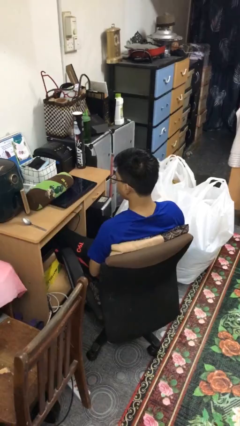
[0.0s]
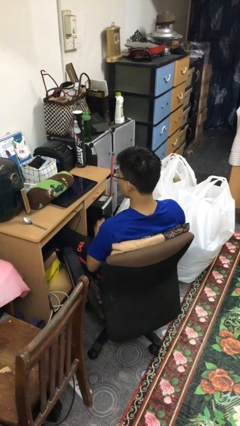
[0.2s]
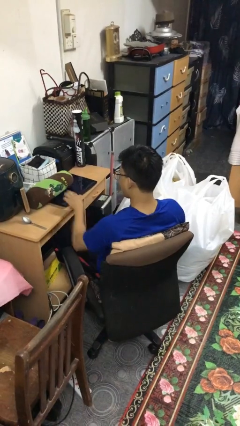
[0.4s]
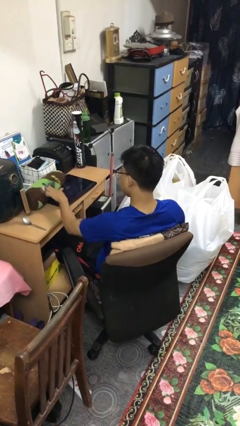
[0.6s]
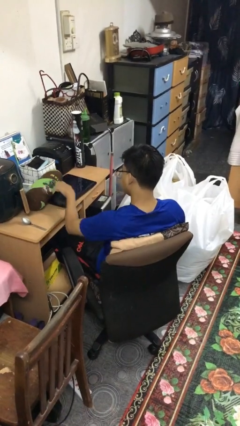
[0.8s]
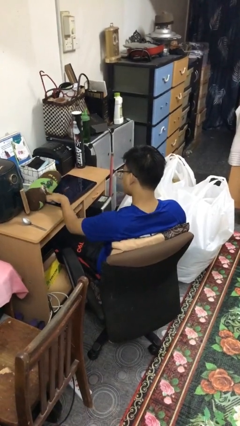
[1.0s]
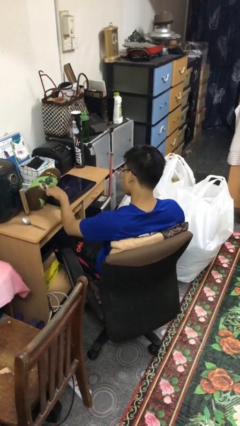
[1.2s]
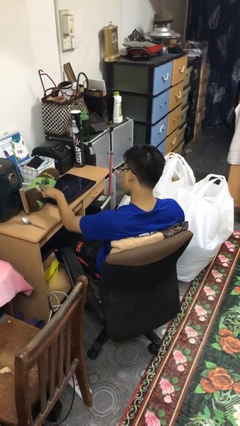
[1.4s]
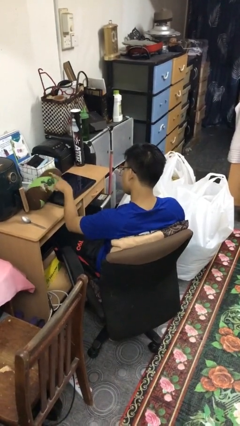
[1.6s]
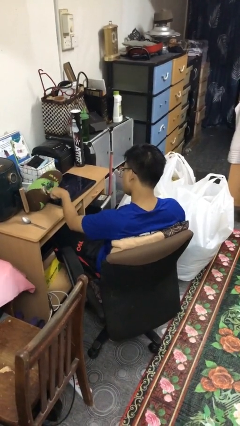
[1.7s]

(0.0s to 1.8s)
person taps object with finger

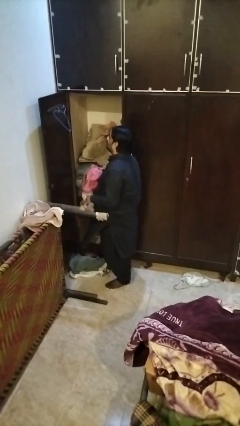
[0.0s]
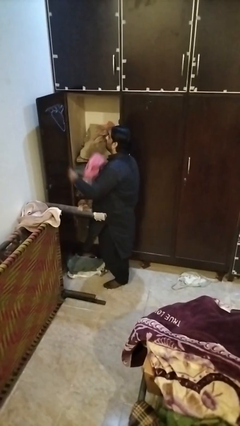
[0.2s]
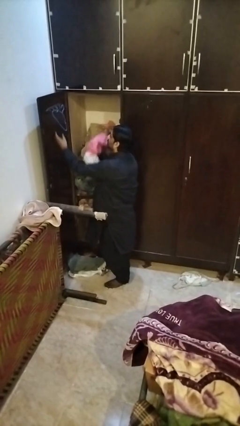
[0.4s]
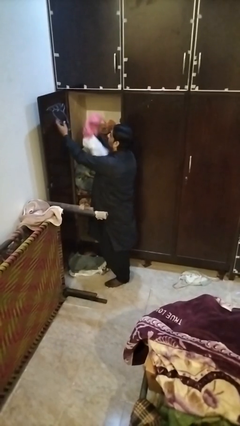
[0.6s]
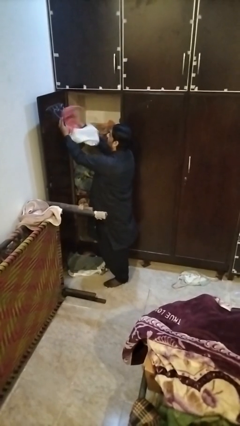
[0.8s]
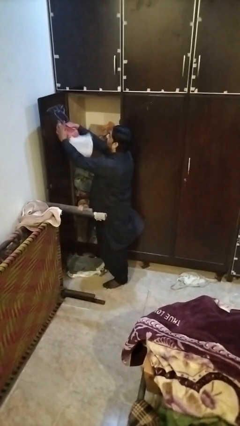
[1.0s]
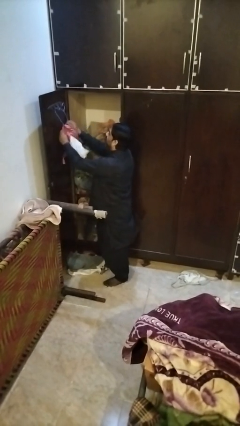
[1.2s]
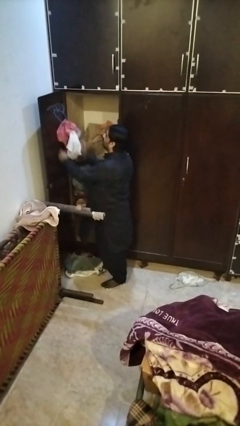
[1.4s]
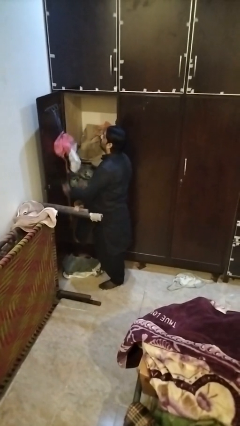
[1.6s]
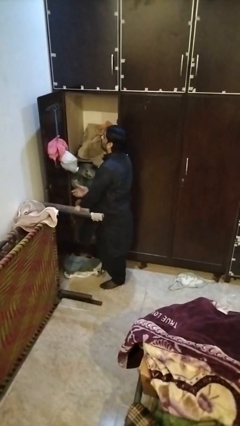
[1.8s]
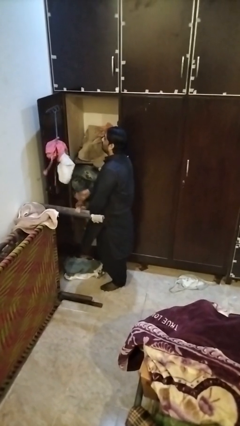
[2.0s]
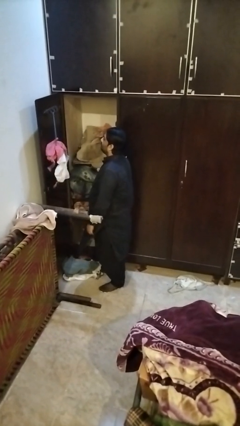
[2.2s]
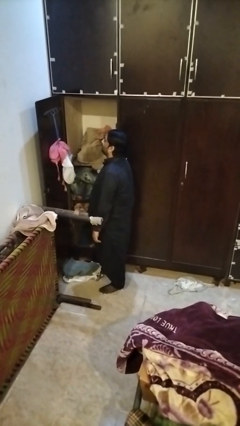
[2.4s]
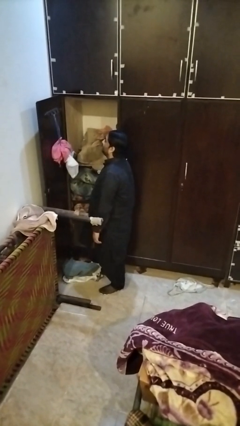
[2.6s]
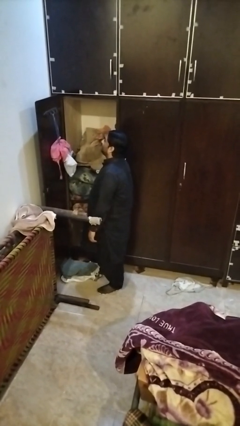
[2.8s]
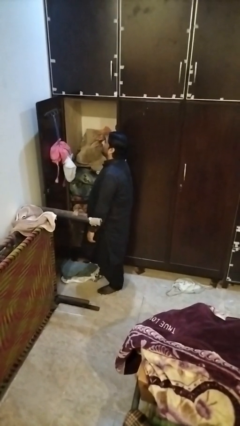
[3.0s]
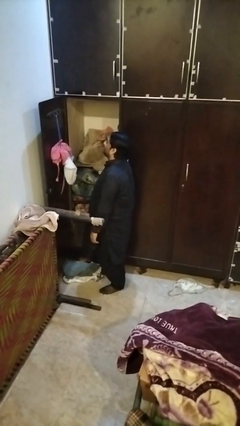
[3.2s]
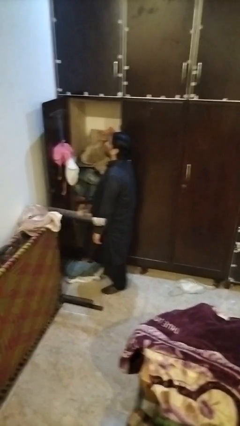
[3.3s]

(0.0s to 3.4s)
person puts clothes into closet

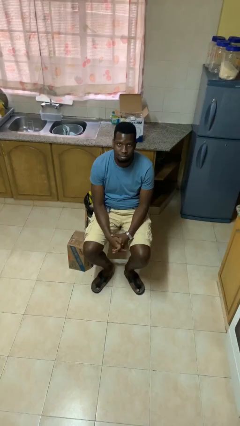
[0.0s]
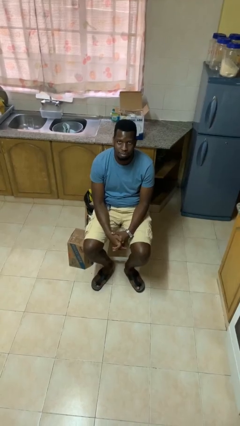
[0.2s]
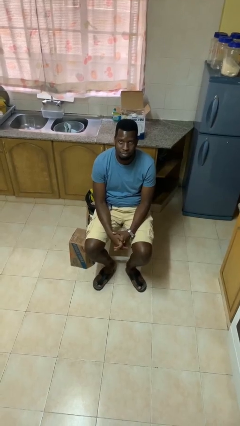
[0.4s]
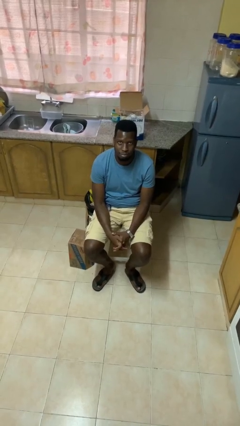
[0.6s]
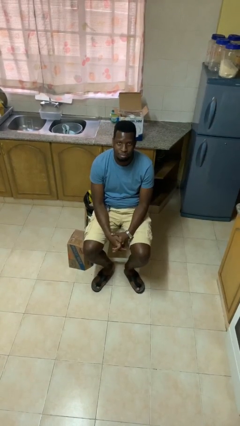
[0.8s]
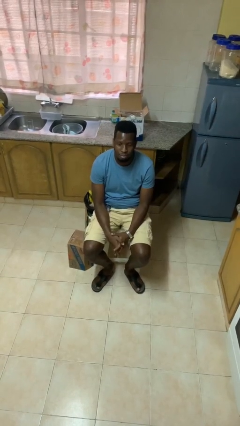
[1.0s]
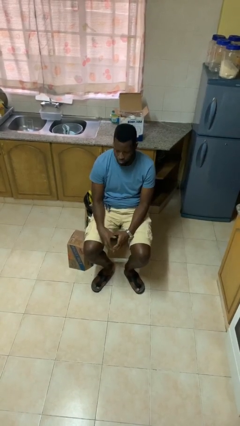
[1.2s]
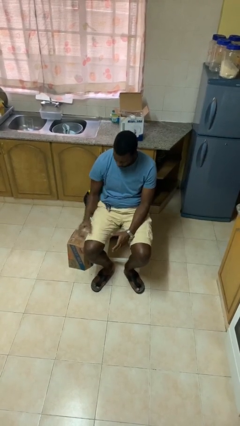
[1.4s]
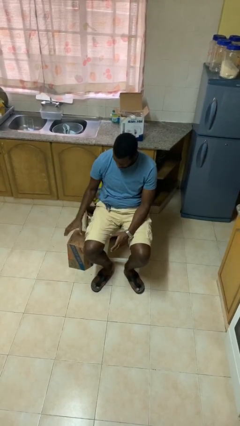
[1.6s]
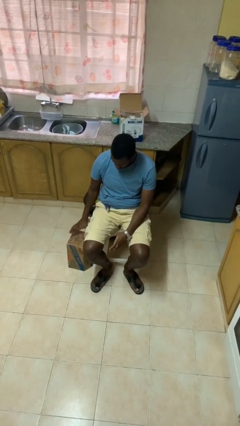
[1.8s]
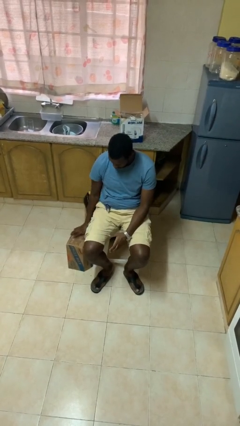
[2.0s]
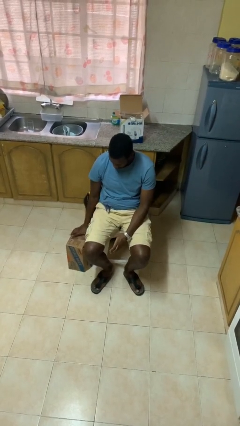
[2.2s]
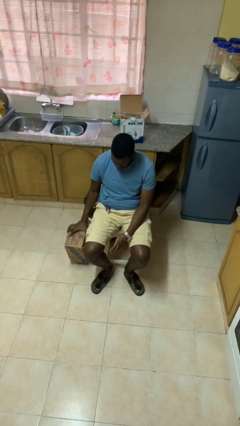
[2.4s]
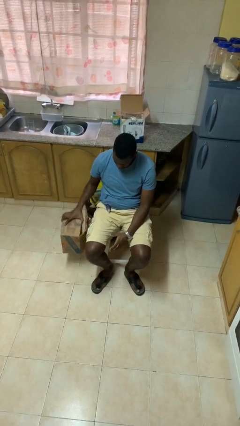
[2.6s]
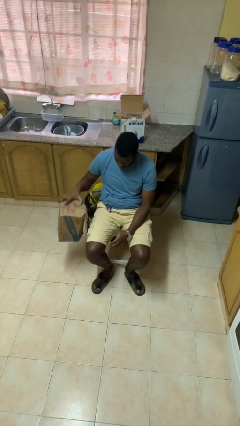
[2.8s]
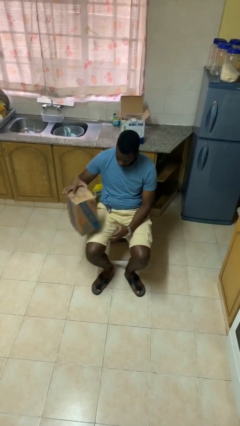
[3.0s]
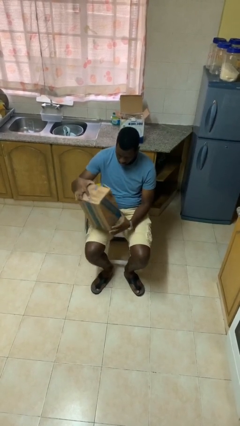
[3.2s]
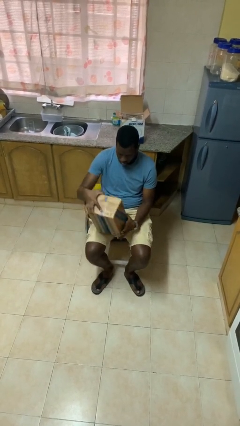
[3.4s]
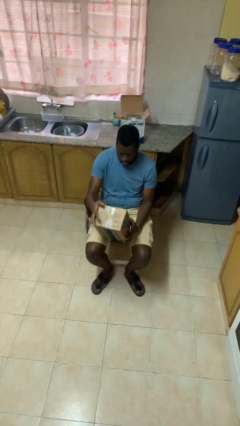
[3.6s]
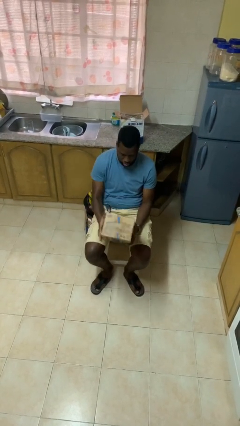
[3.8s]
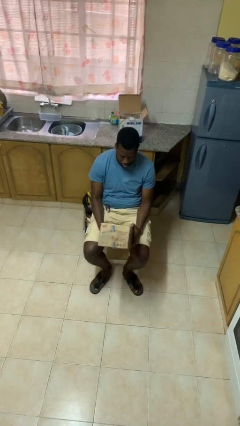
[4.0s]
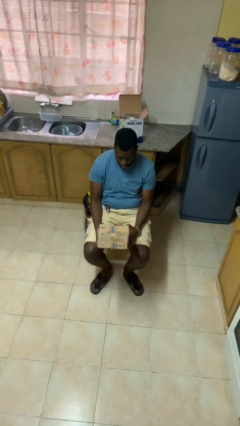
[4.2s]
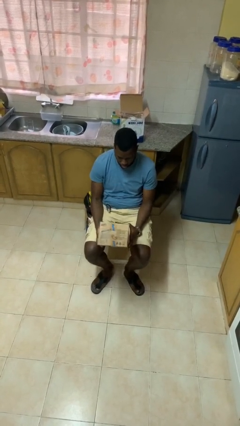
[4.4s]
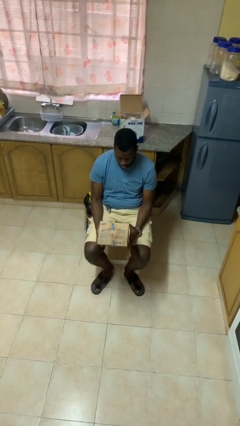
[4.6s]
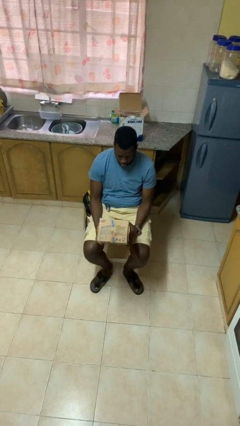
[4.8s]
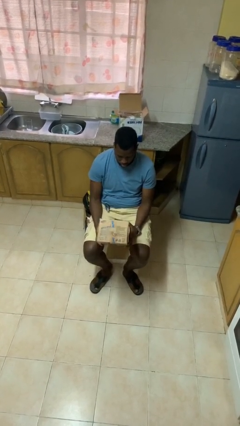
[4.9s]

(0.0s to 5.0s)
person picks up object from floor

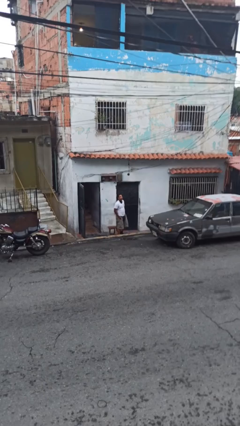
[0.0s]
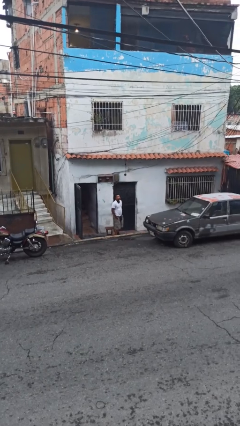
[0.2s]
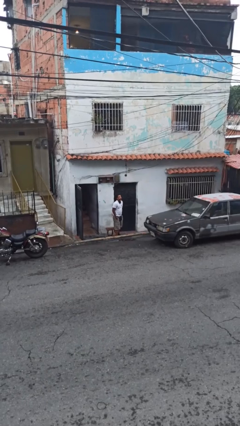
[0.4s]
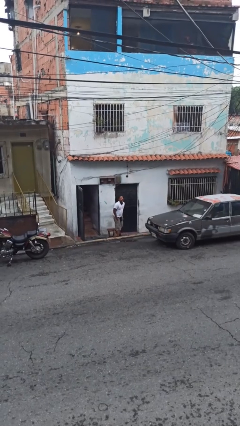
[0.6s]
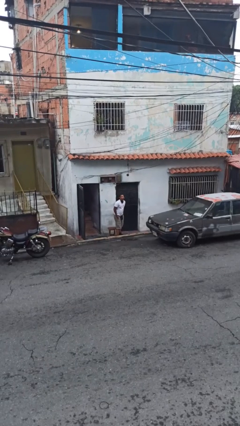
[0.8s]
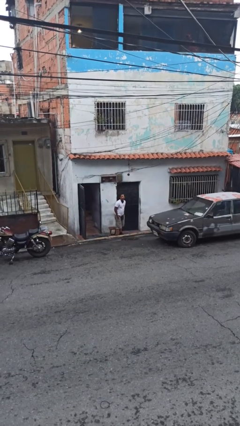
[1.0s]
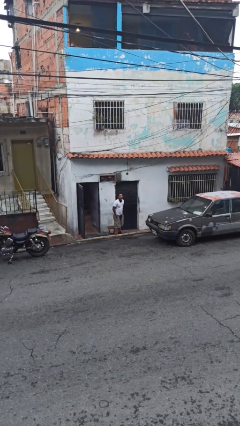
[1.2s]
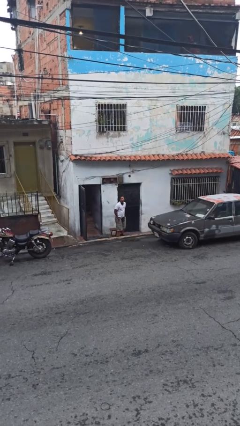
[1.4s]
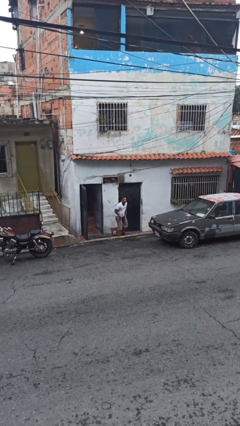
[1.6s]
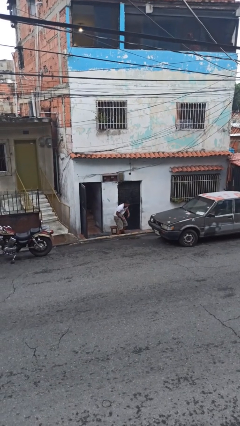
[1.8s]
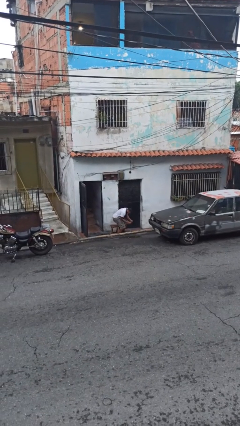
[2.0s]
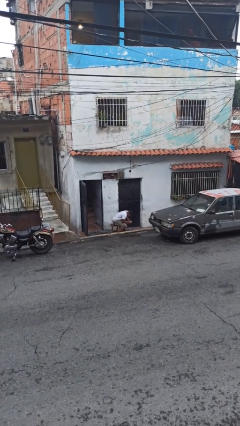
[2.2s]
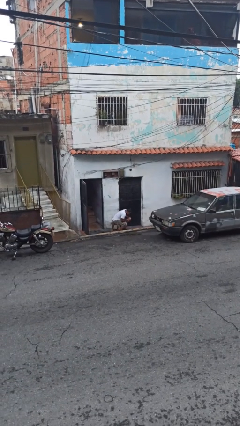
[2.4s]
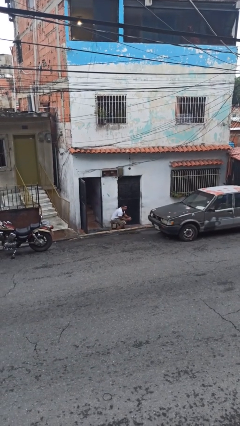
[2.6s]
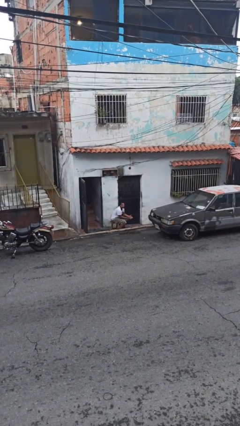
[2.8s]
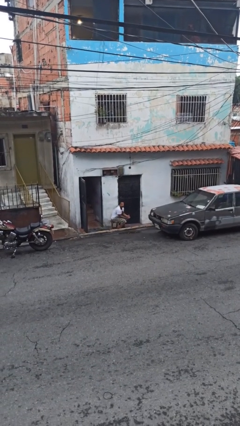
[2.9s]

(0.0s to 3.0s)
person sits down

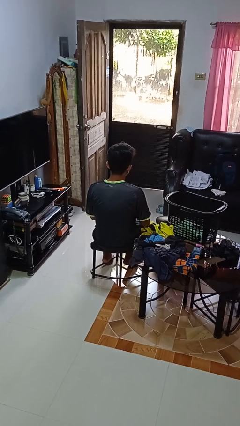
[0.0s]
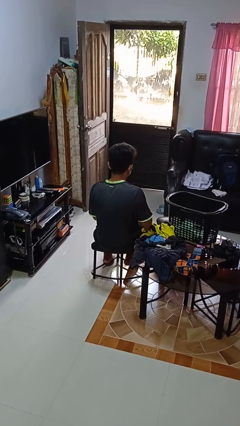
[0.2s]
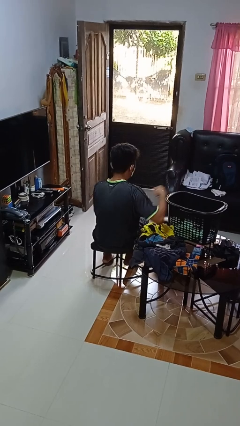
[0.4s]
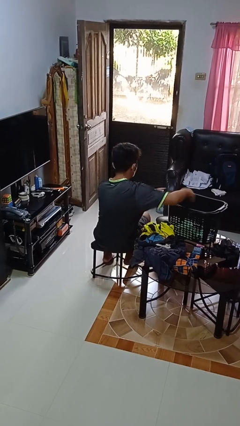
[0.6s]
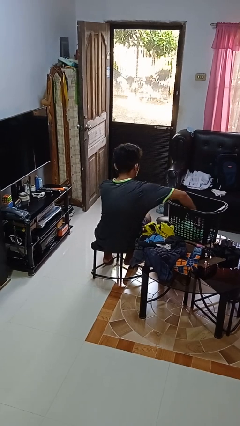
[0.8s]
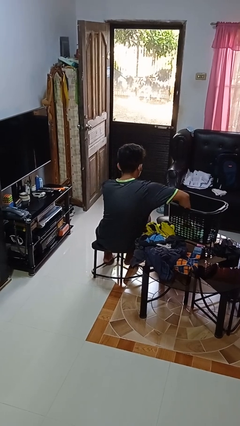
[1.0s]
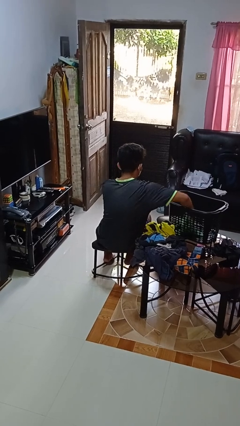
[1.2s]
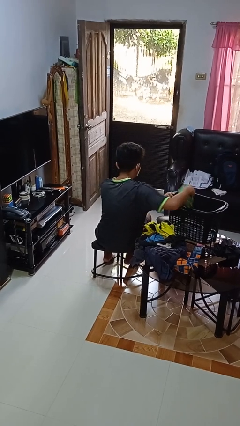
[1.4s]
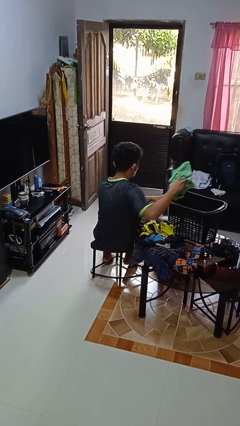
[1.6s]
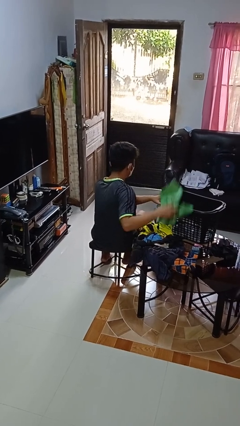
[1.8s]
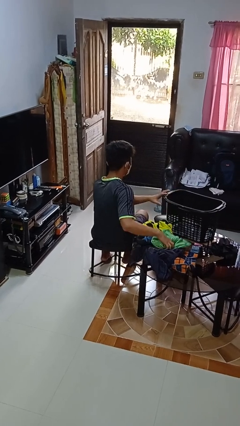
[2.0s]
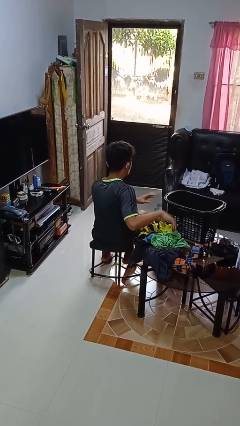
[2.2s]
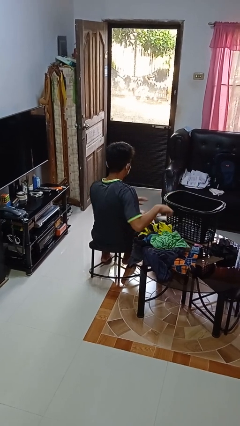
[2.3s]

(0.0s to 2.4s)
person takes object from basket

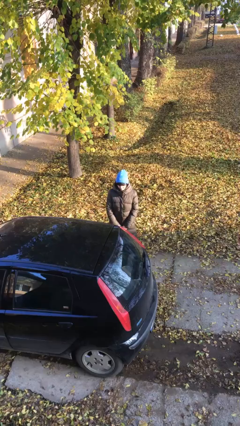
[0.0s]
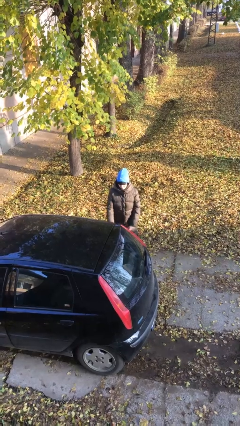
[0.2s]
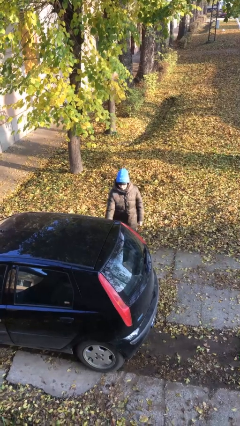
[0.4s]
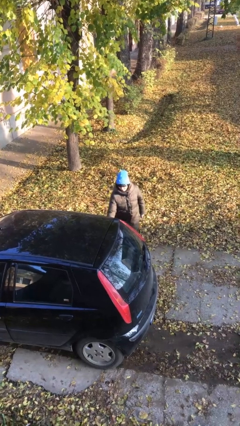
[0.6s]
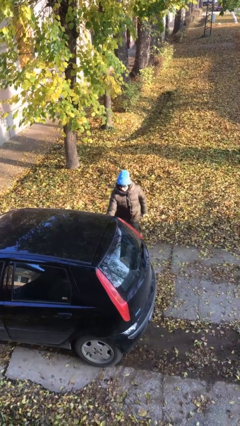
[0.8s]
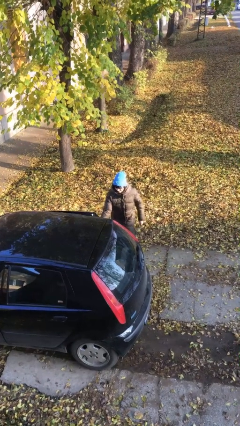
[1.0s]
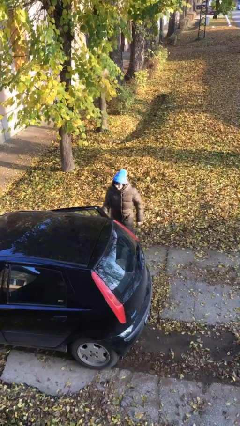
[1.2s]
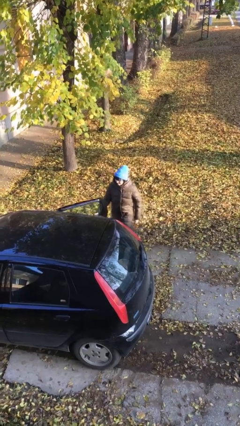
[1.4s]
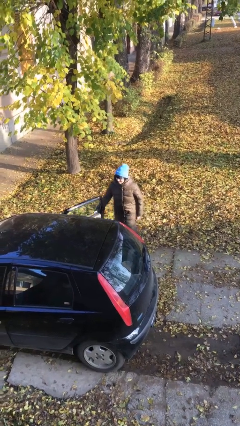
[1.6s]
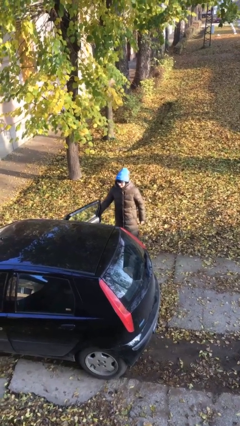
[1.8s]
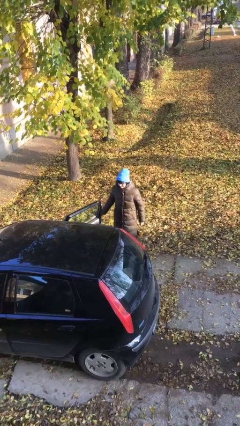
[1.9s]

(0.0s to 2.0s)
person opens car door
